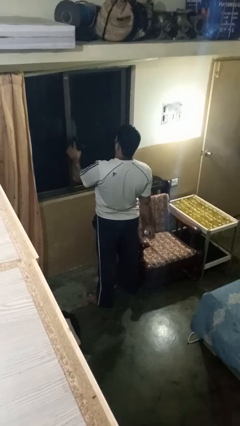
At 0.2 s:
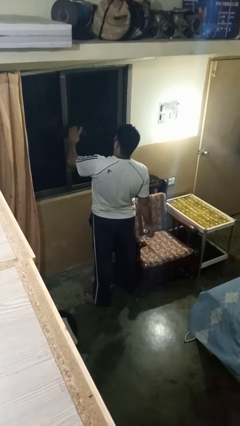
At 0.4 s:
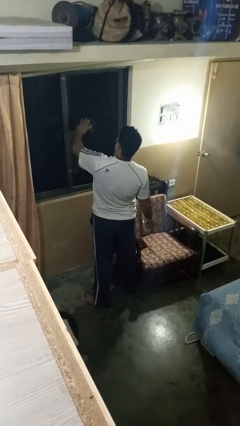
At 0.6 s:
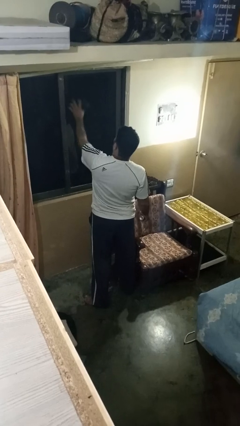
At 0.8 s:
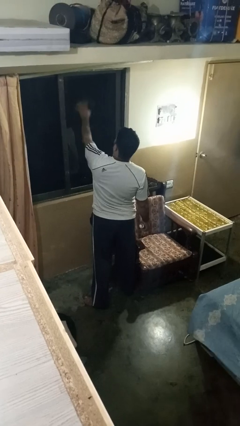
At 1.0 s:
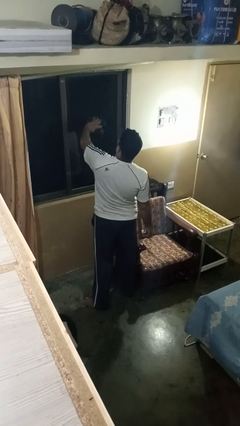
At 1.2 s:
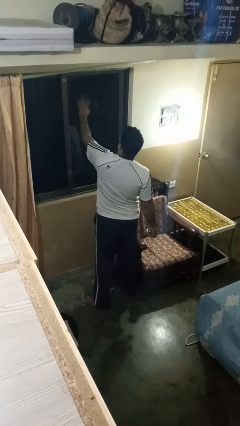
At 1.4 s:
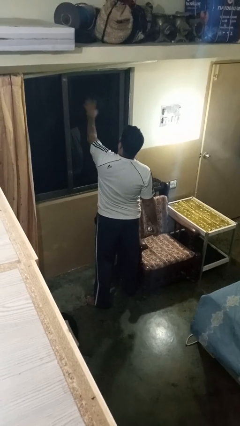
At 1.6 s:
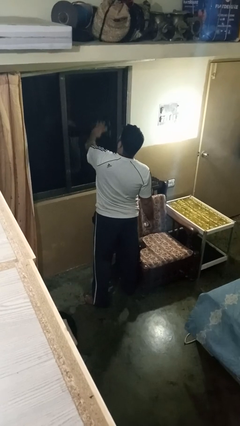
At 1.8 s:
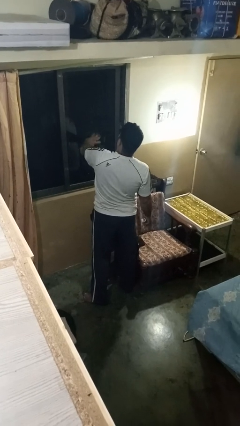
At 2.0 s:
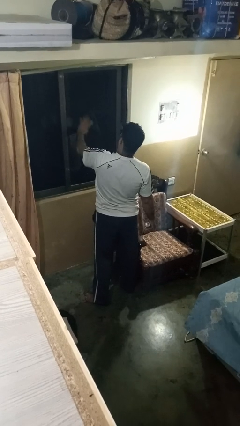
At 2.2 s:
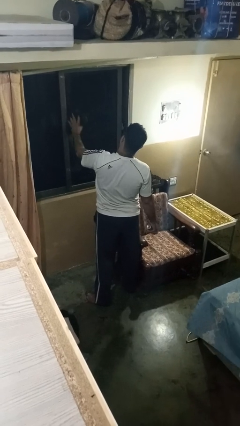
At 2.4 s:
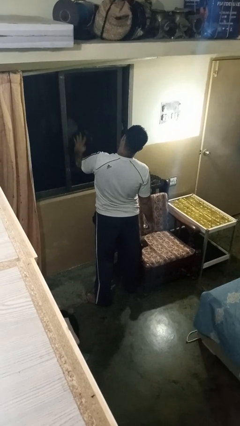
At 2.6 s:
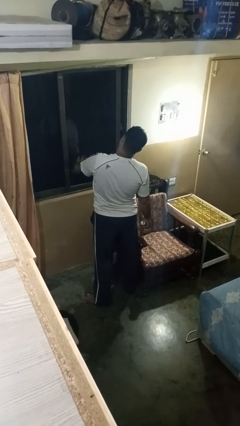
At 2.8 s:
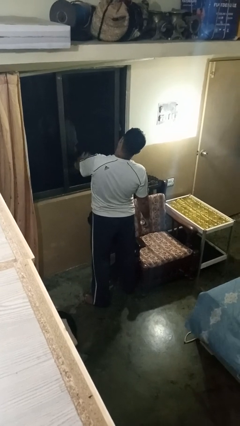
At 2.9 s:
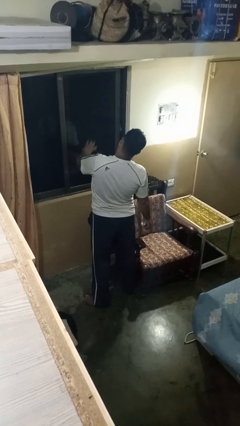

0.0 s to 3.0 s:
person washes window

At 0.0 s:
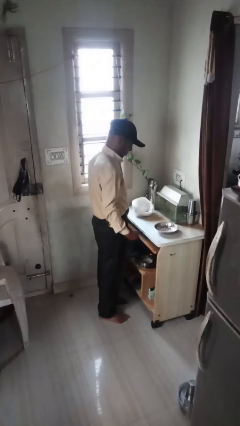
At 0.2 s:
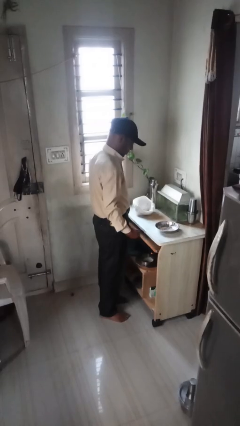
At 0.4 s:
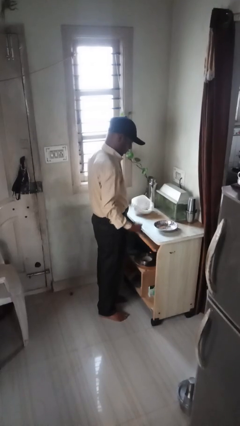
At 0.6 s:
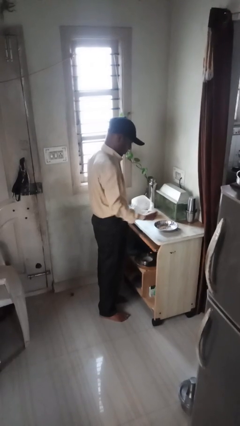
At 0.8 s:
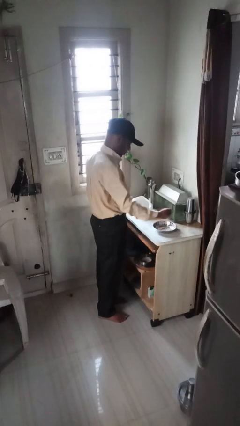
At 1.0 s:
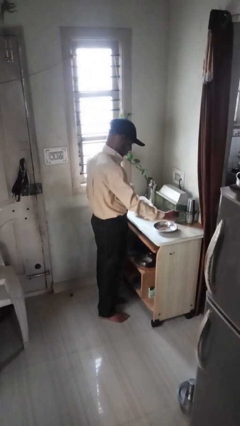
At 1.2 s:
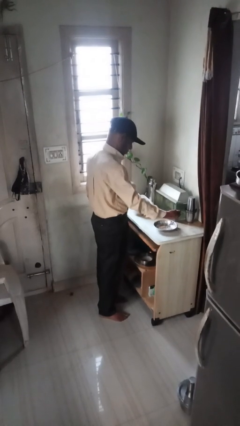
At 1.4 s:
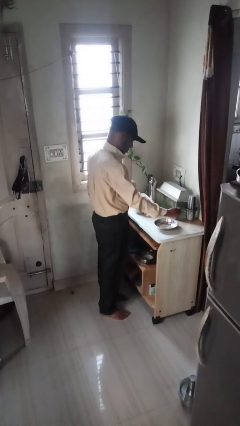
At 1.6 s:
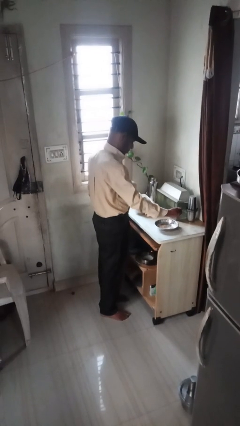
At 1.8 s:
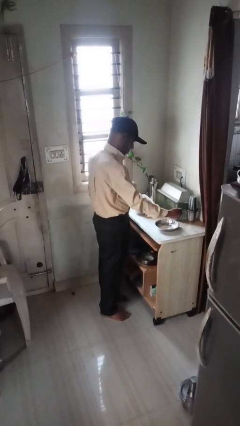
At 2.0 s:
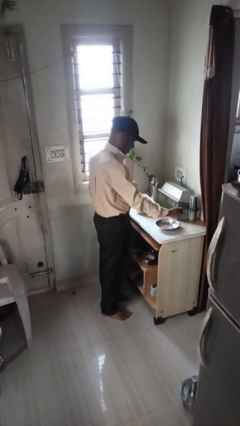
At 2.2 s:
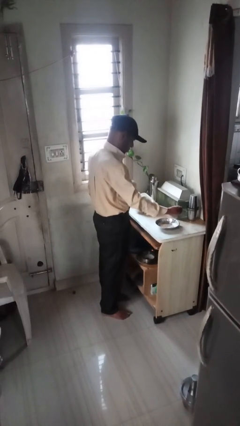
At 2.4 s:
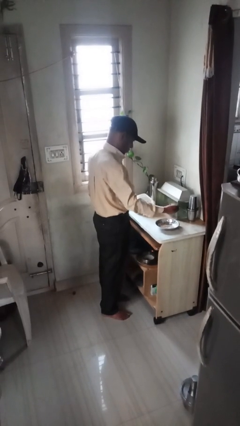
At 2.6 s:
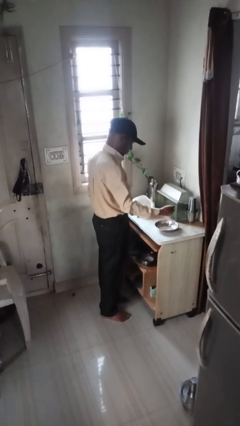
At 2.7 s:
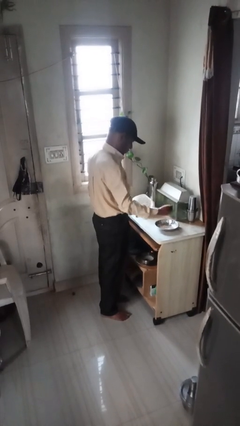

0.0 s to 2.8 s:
person pours into bowl

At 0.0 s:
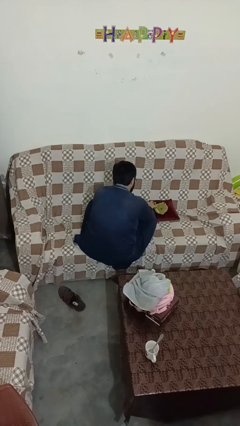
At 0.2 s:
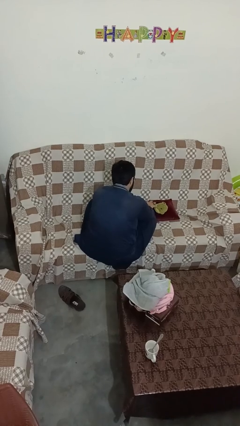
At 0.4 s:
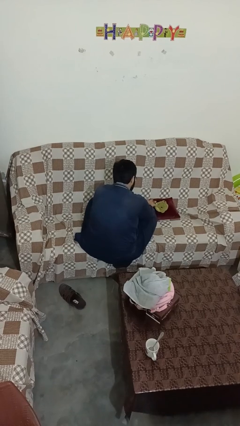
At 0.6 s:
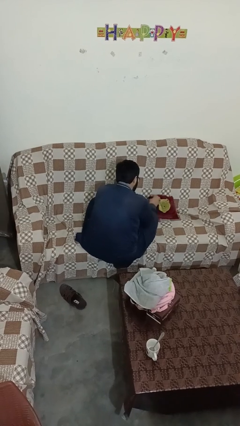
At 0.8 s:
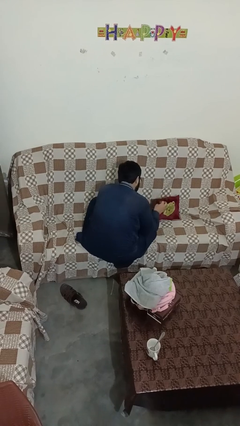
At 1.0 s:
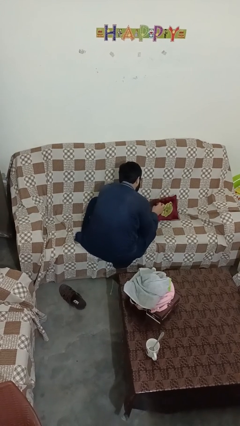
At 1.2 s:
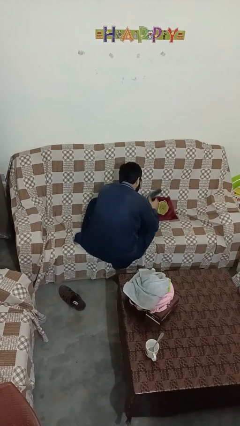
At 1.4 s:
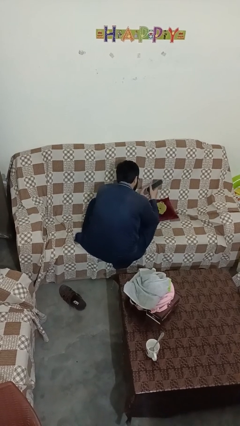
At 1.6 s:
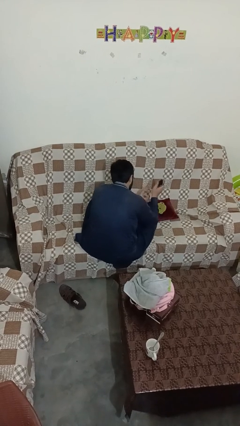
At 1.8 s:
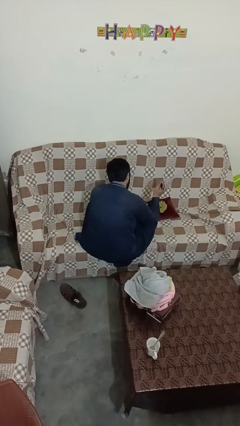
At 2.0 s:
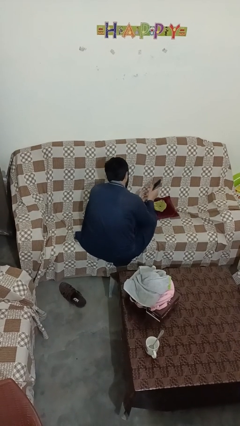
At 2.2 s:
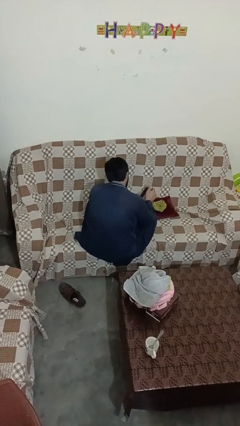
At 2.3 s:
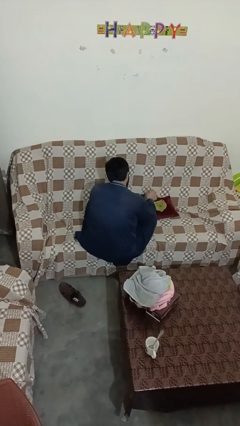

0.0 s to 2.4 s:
person searches in couch

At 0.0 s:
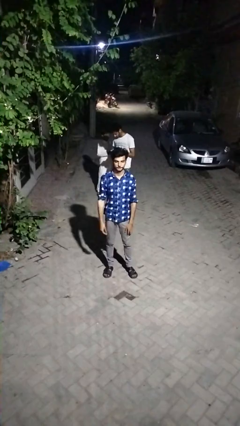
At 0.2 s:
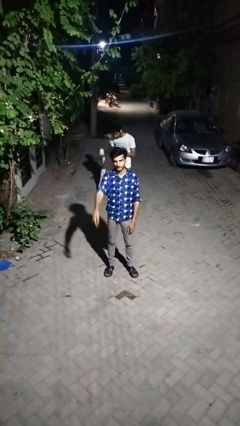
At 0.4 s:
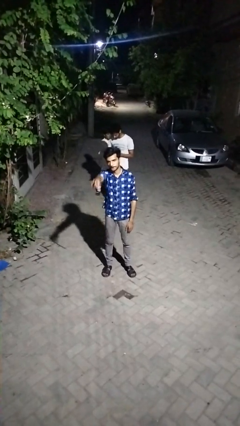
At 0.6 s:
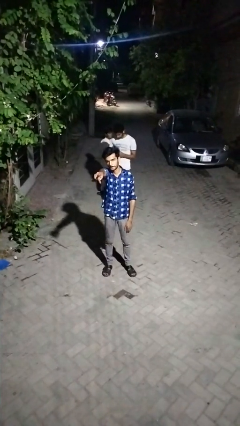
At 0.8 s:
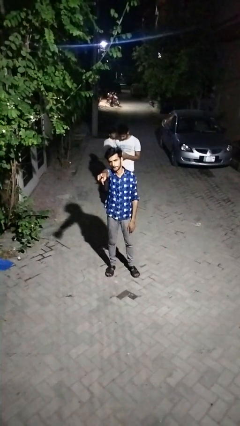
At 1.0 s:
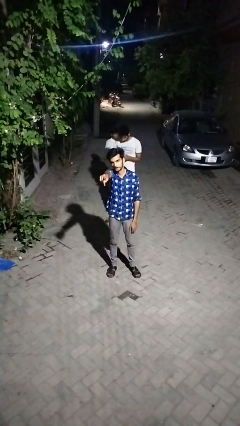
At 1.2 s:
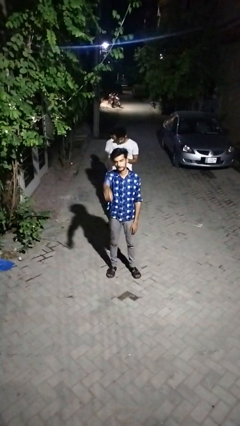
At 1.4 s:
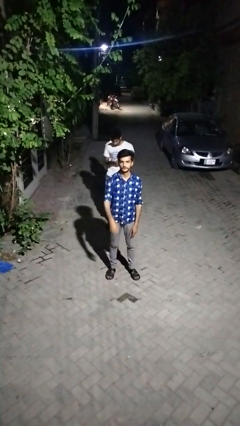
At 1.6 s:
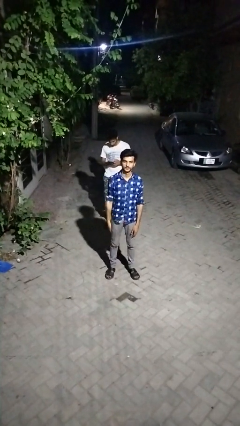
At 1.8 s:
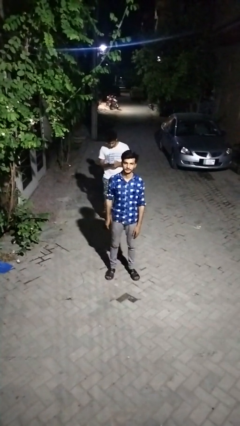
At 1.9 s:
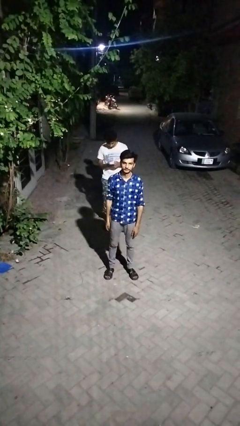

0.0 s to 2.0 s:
person points at person

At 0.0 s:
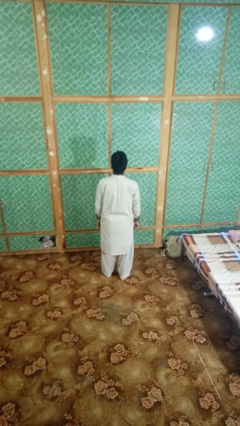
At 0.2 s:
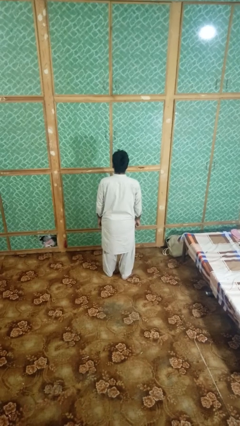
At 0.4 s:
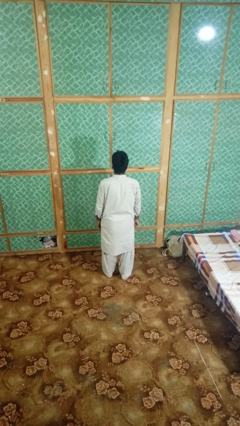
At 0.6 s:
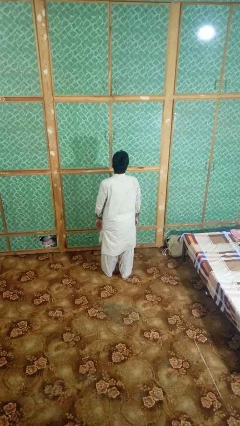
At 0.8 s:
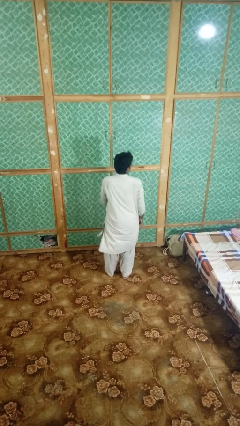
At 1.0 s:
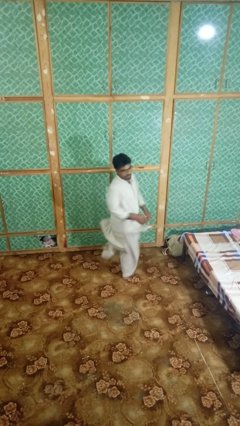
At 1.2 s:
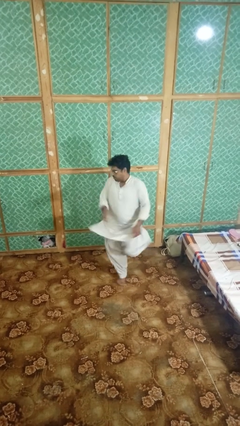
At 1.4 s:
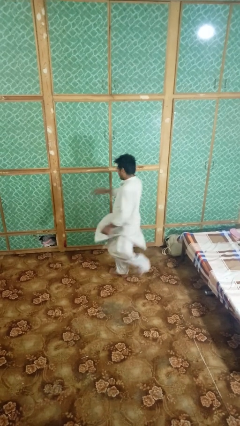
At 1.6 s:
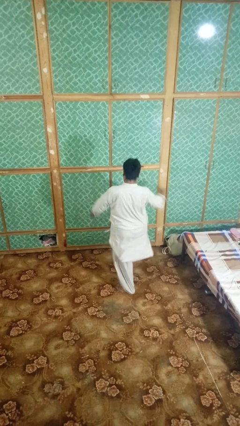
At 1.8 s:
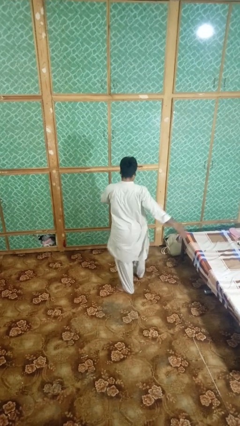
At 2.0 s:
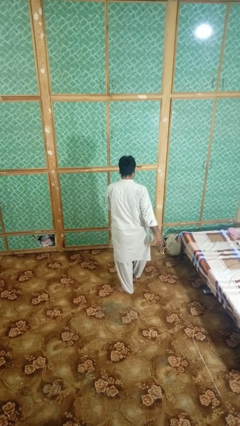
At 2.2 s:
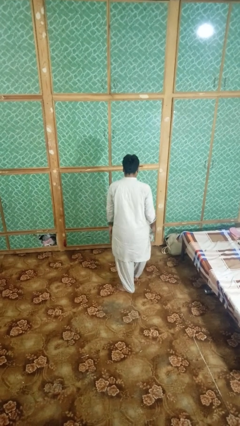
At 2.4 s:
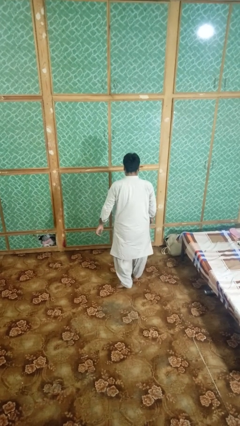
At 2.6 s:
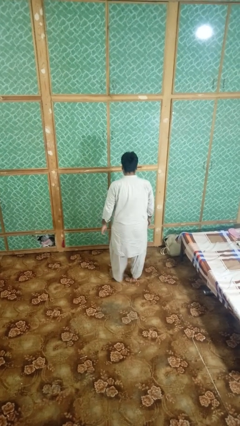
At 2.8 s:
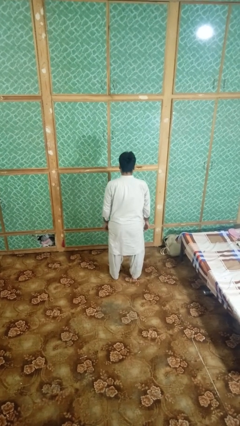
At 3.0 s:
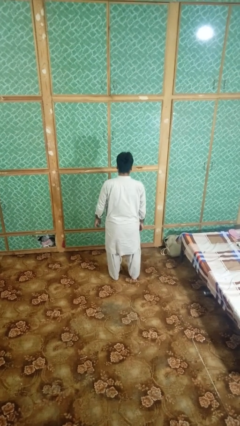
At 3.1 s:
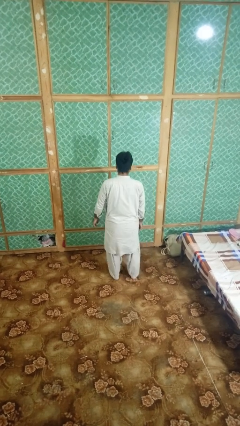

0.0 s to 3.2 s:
person twirls

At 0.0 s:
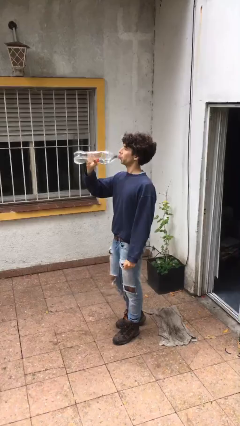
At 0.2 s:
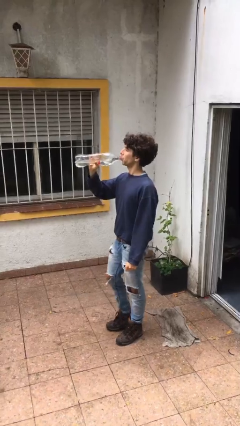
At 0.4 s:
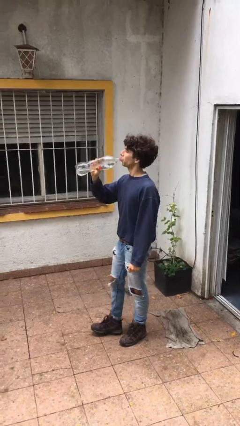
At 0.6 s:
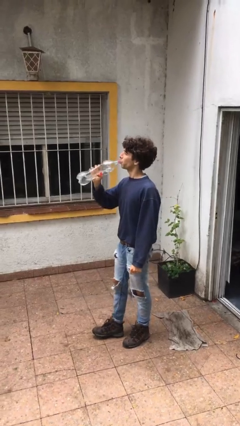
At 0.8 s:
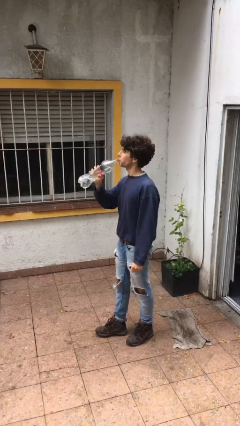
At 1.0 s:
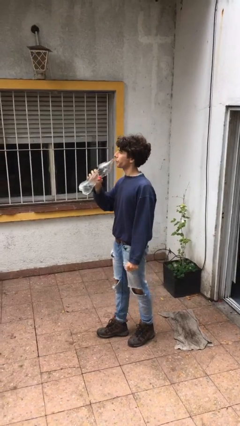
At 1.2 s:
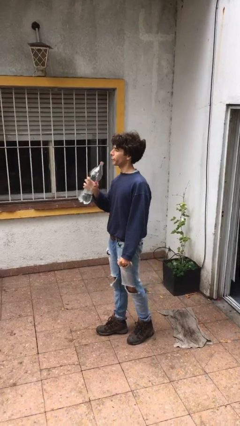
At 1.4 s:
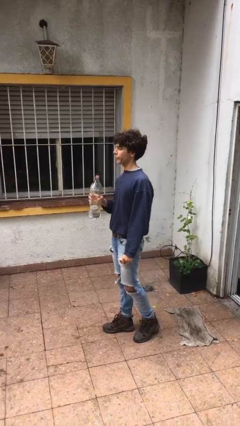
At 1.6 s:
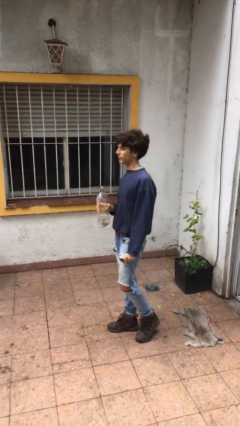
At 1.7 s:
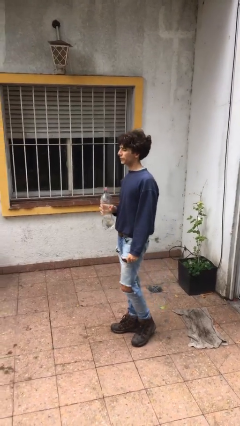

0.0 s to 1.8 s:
person drinks from bottle

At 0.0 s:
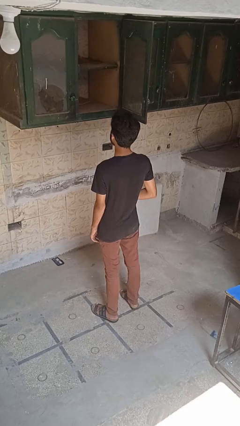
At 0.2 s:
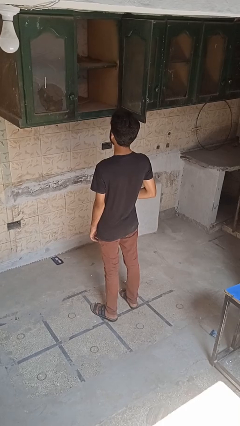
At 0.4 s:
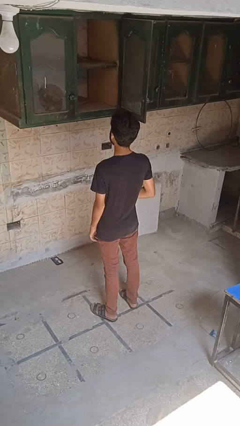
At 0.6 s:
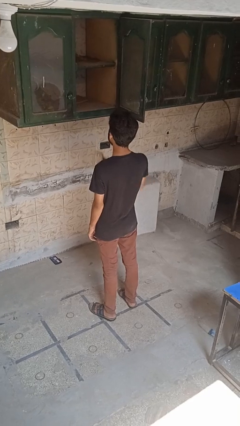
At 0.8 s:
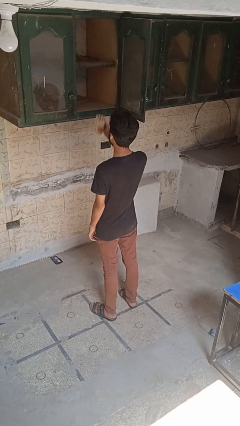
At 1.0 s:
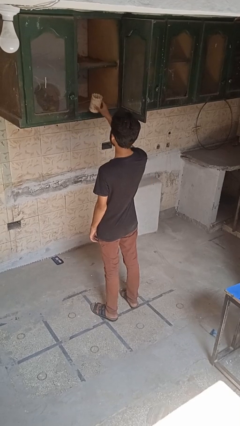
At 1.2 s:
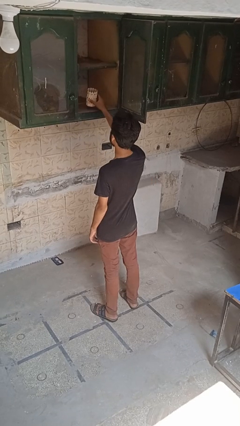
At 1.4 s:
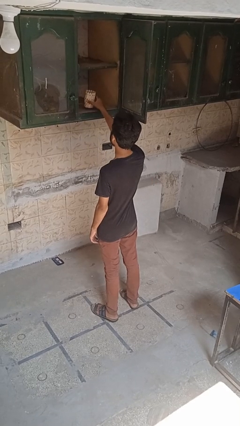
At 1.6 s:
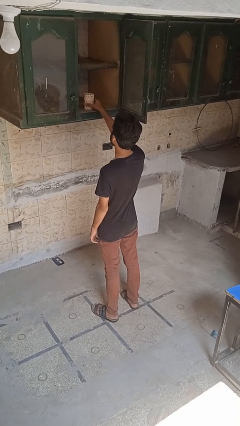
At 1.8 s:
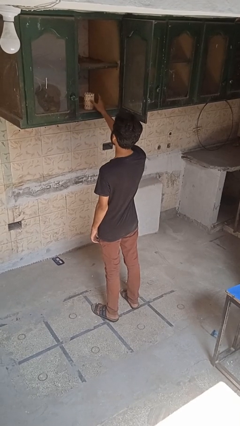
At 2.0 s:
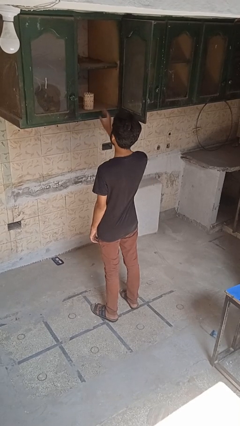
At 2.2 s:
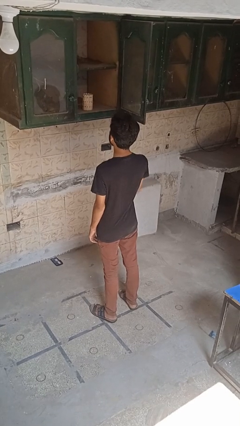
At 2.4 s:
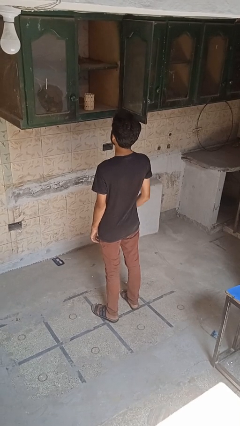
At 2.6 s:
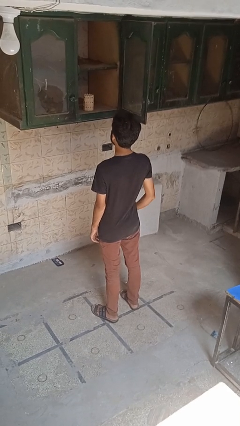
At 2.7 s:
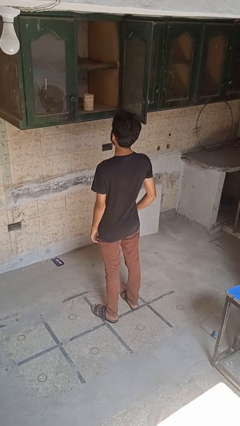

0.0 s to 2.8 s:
person puts down object into cabinet
